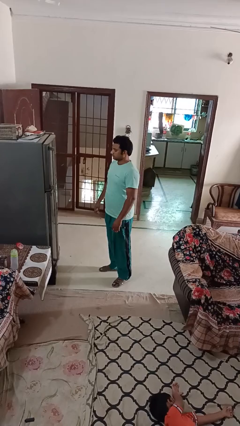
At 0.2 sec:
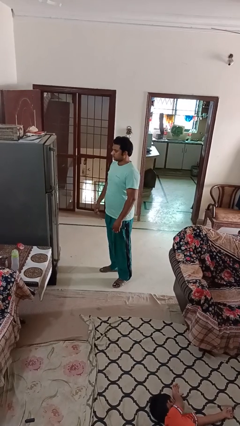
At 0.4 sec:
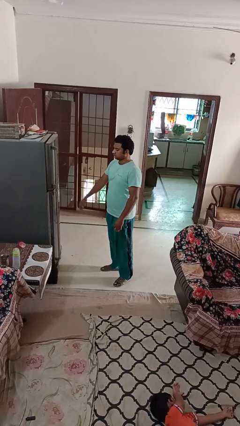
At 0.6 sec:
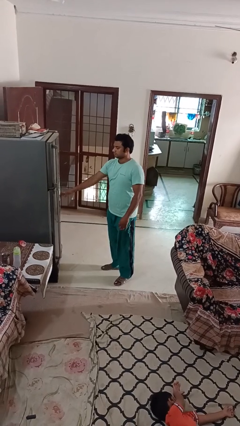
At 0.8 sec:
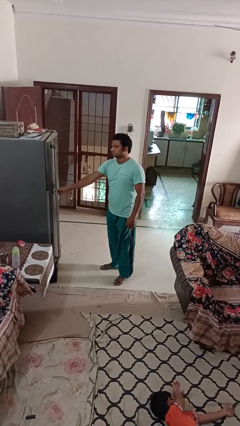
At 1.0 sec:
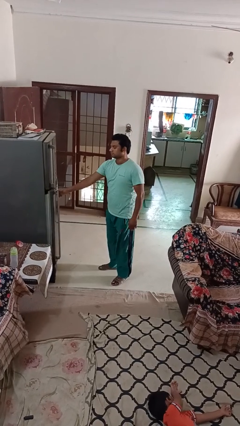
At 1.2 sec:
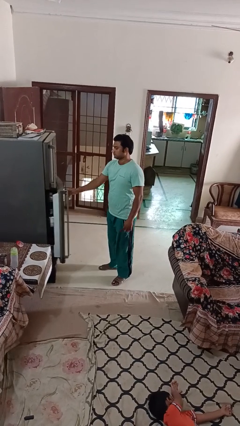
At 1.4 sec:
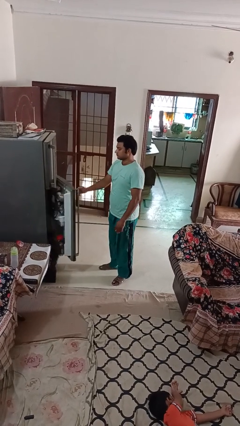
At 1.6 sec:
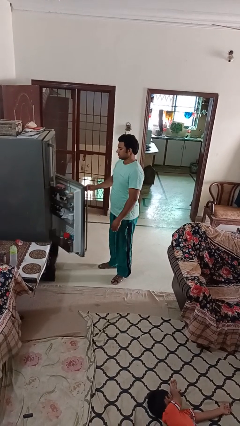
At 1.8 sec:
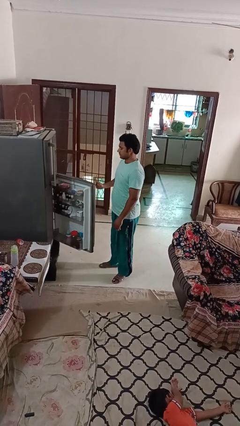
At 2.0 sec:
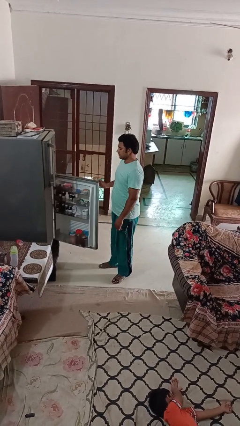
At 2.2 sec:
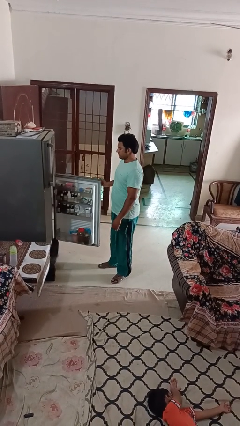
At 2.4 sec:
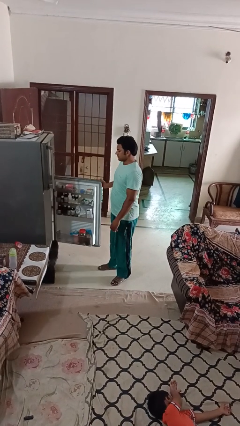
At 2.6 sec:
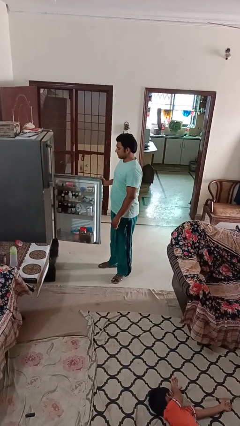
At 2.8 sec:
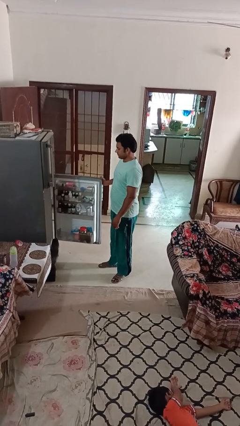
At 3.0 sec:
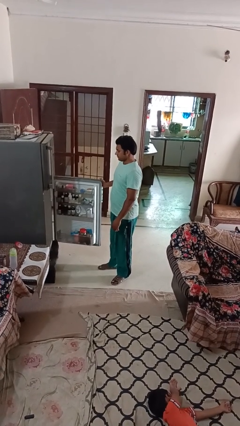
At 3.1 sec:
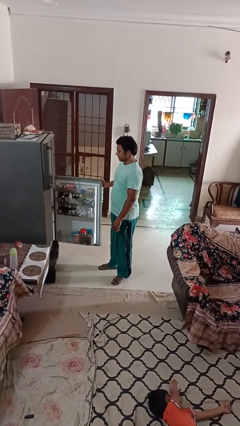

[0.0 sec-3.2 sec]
person opens refrigerator

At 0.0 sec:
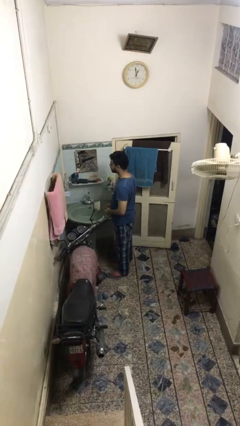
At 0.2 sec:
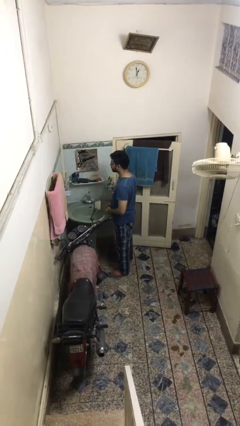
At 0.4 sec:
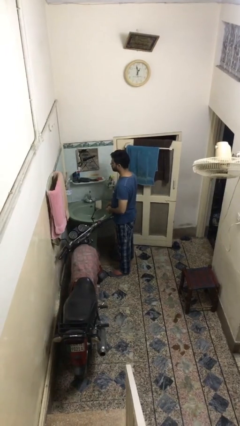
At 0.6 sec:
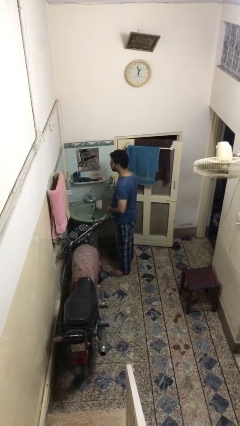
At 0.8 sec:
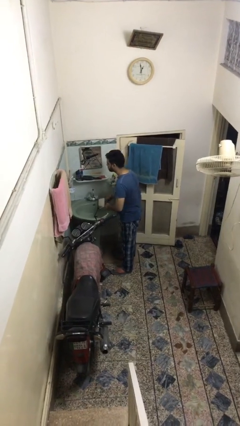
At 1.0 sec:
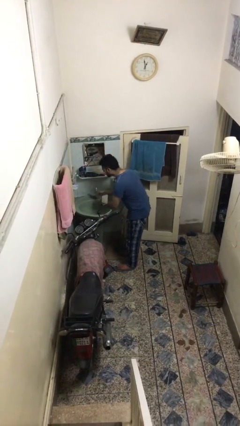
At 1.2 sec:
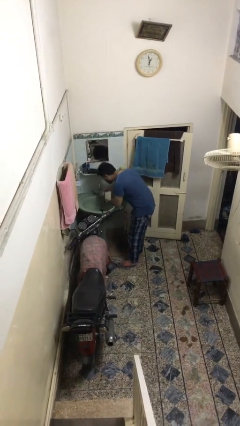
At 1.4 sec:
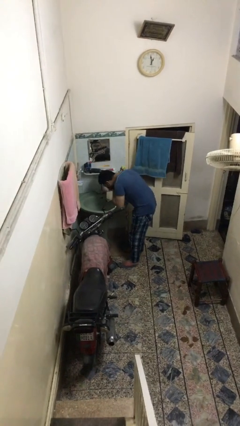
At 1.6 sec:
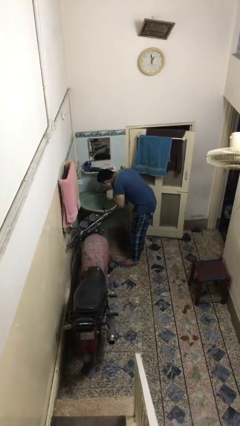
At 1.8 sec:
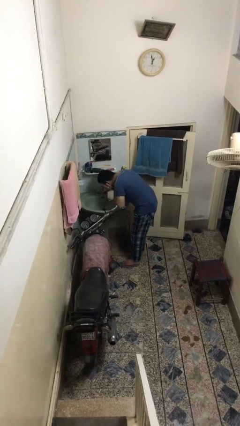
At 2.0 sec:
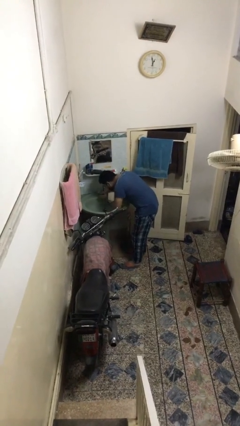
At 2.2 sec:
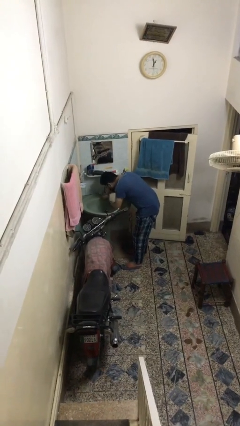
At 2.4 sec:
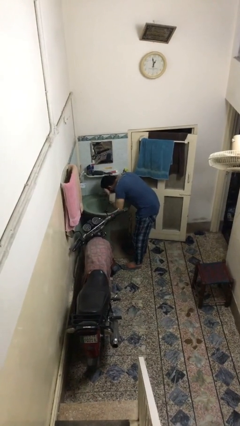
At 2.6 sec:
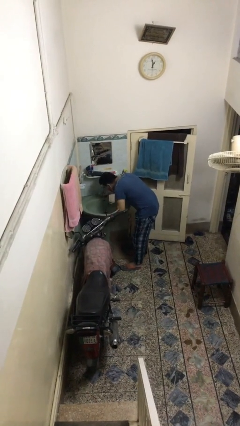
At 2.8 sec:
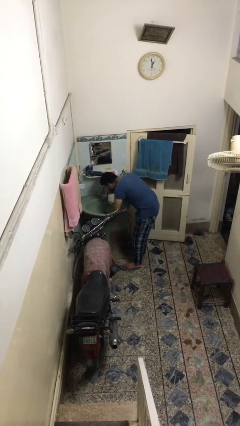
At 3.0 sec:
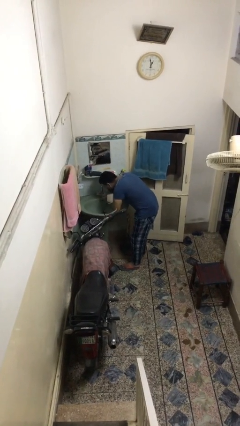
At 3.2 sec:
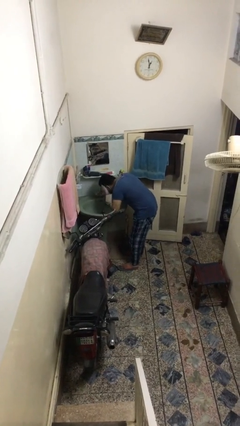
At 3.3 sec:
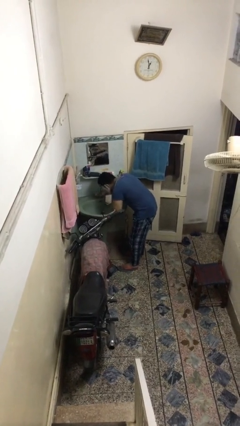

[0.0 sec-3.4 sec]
person washes face

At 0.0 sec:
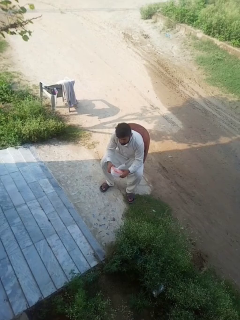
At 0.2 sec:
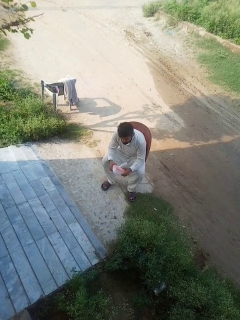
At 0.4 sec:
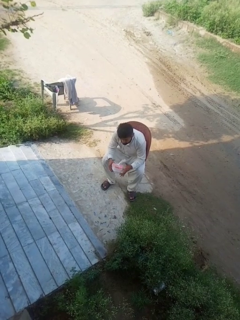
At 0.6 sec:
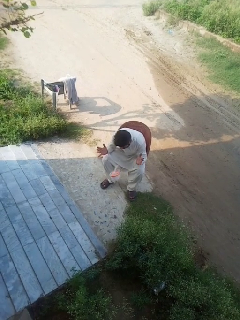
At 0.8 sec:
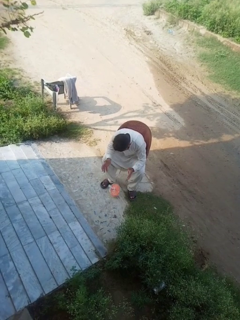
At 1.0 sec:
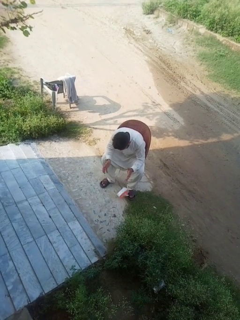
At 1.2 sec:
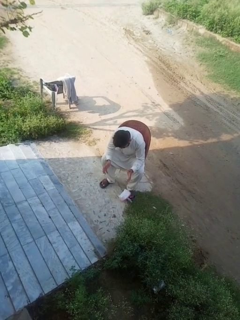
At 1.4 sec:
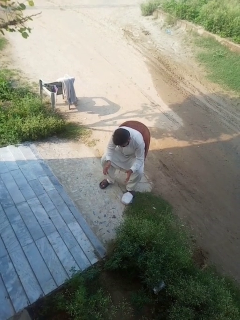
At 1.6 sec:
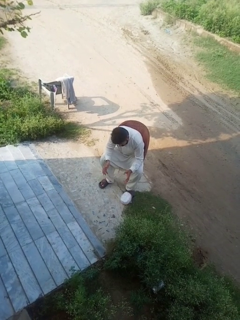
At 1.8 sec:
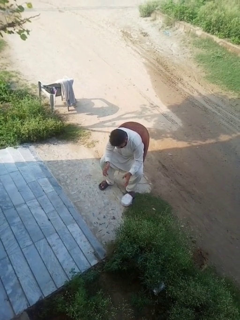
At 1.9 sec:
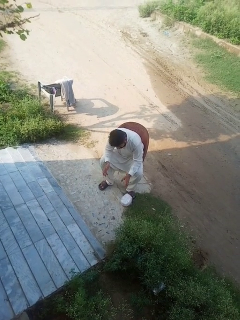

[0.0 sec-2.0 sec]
person drops object

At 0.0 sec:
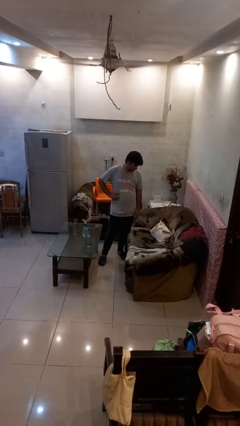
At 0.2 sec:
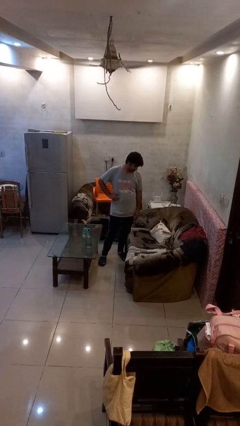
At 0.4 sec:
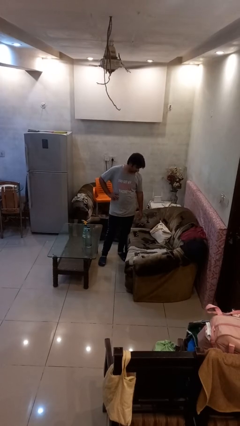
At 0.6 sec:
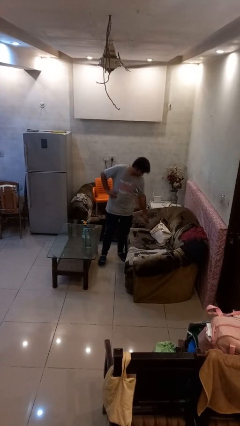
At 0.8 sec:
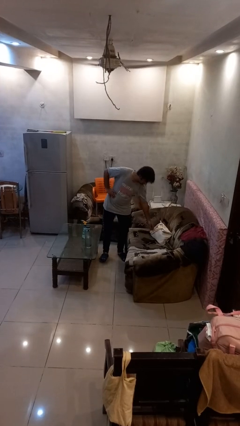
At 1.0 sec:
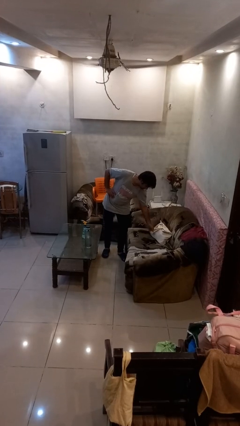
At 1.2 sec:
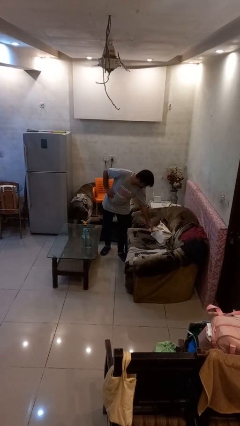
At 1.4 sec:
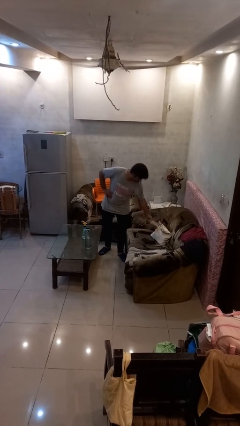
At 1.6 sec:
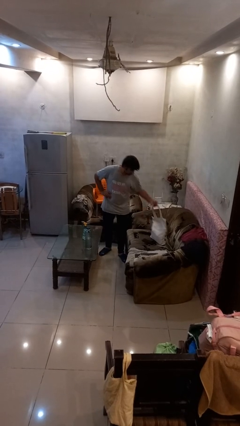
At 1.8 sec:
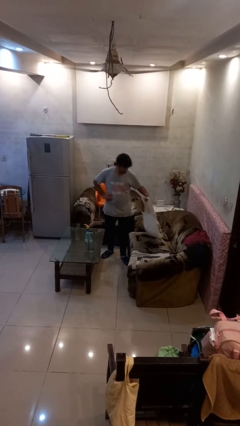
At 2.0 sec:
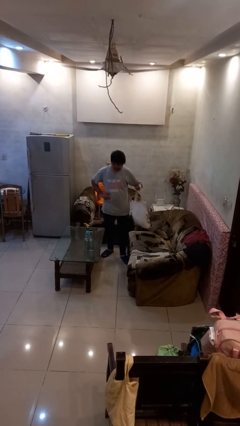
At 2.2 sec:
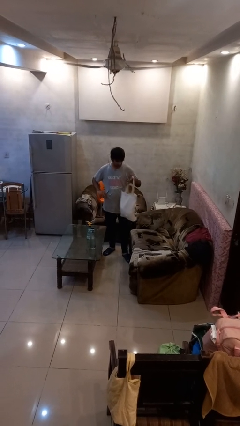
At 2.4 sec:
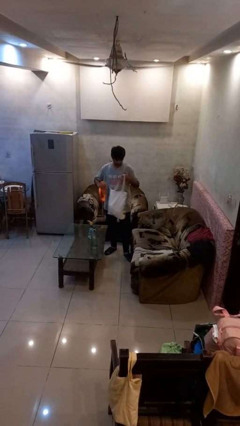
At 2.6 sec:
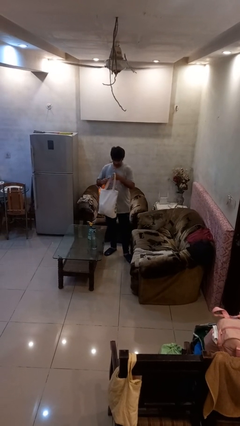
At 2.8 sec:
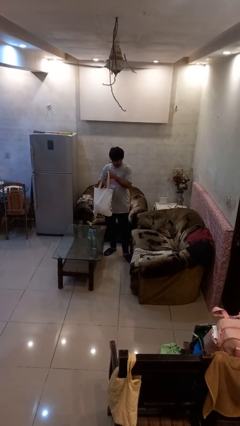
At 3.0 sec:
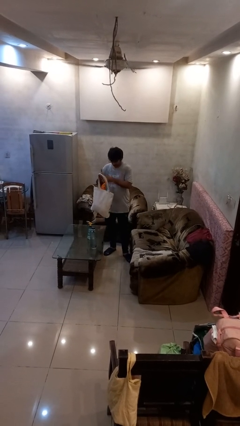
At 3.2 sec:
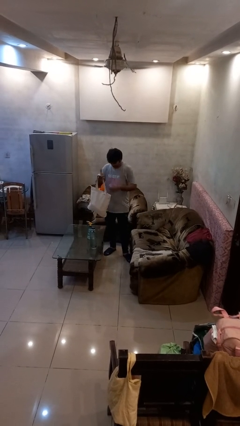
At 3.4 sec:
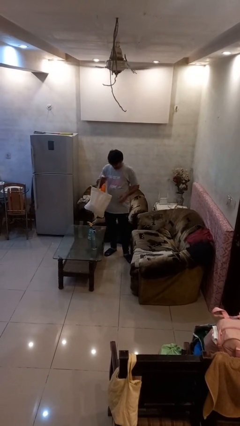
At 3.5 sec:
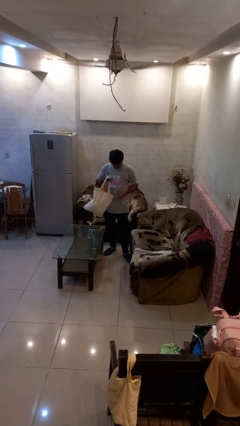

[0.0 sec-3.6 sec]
person picks up object from couch

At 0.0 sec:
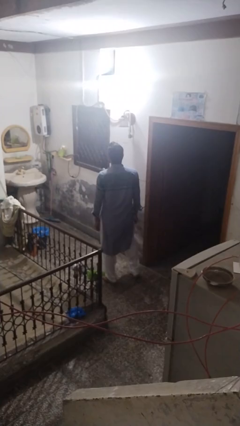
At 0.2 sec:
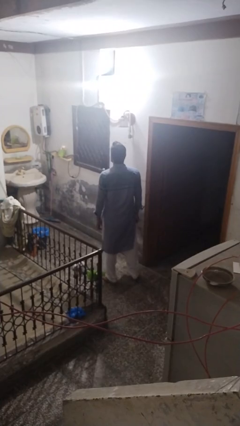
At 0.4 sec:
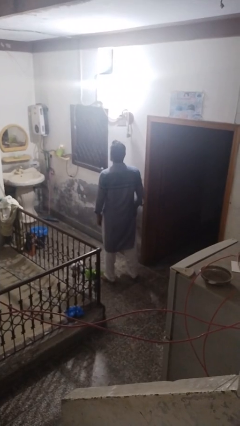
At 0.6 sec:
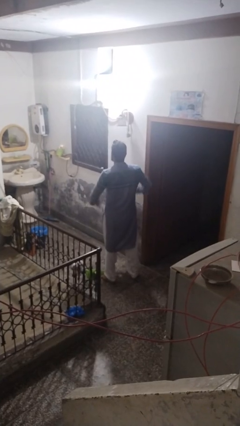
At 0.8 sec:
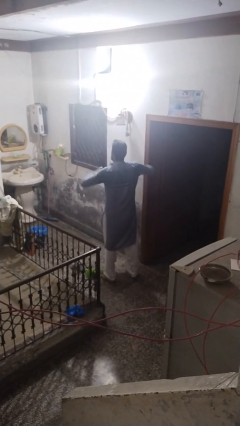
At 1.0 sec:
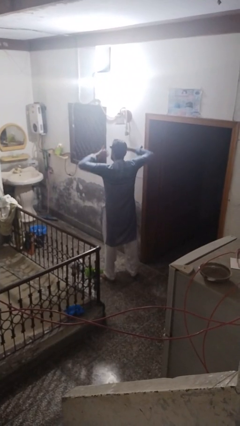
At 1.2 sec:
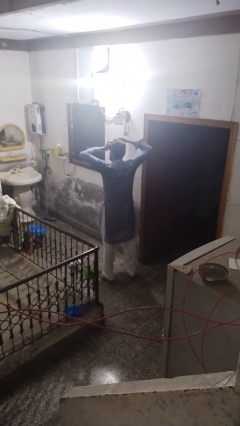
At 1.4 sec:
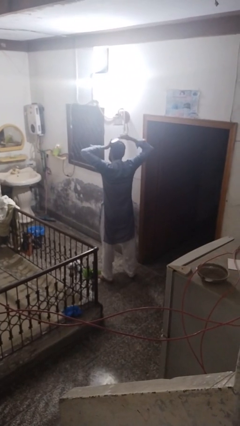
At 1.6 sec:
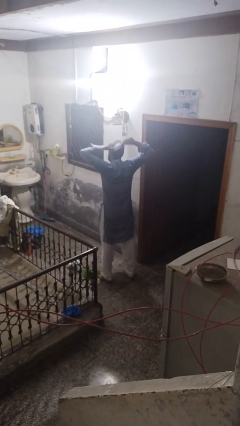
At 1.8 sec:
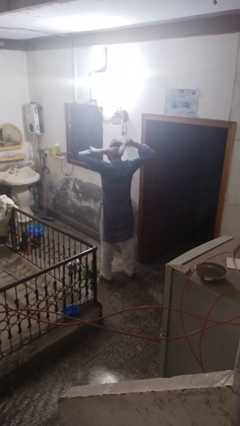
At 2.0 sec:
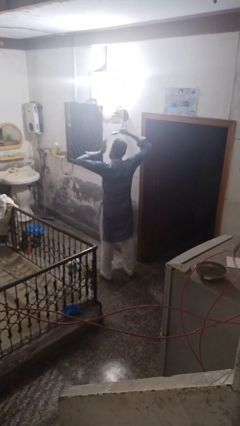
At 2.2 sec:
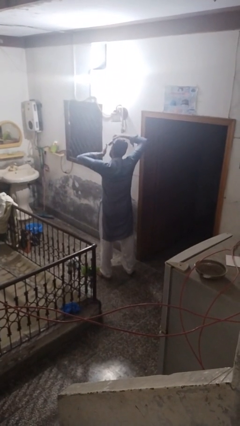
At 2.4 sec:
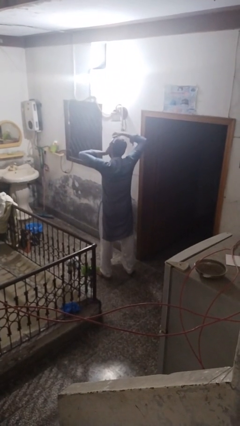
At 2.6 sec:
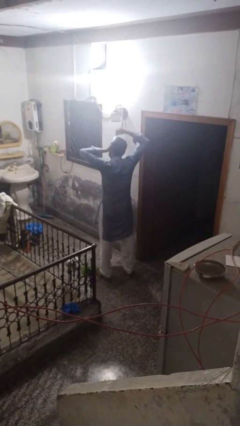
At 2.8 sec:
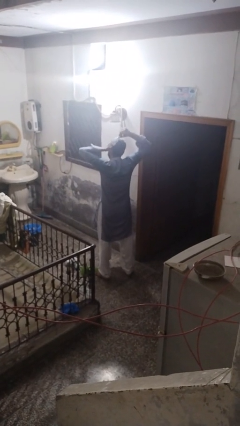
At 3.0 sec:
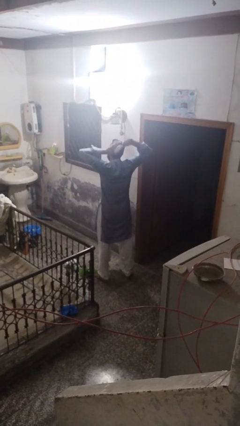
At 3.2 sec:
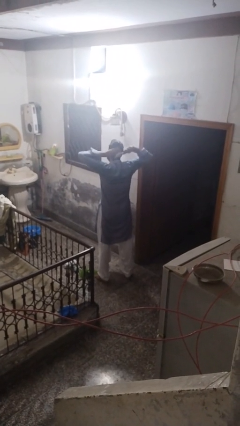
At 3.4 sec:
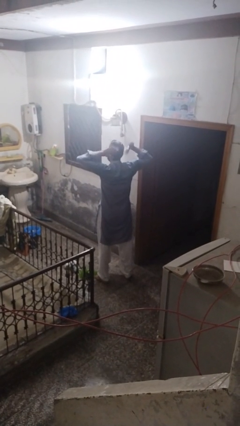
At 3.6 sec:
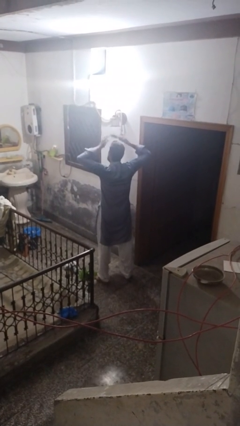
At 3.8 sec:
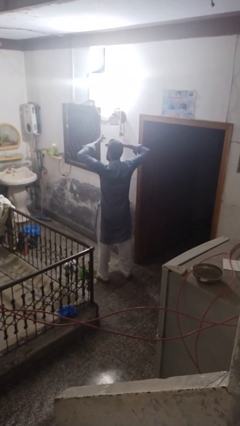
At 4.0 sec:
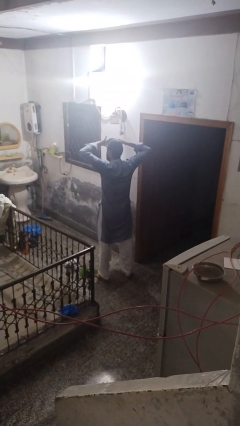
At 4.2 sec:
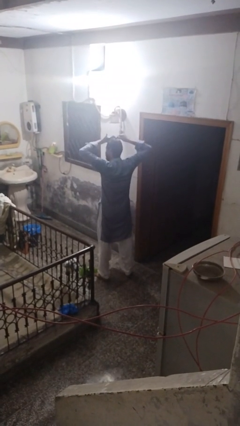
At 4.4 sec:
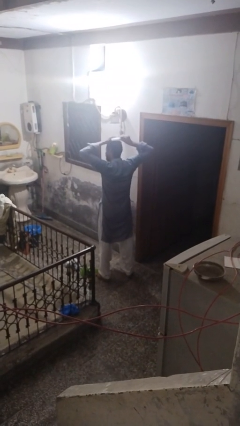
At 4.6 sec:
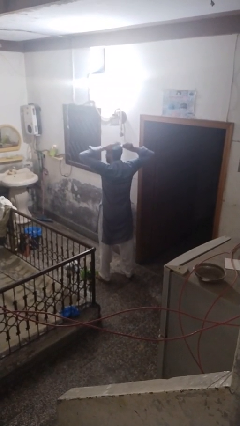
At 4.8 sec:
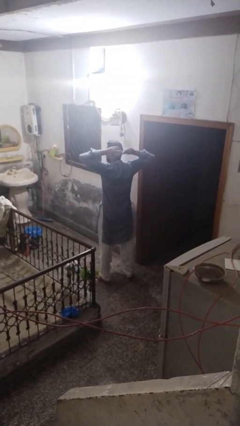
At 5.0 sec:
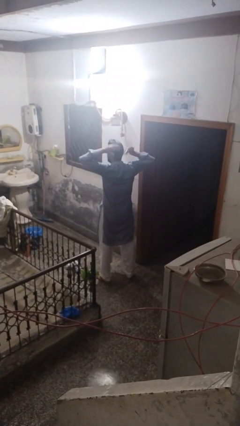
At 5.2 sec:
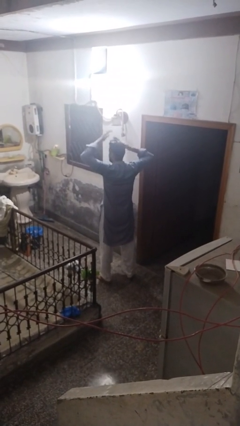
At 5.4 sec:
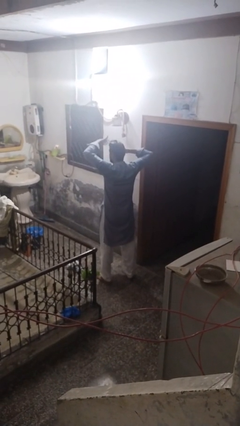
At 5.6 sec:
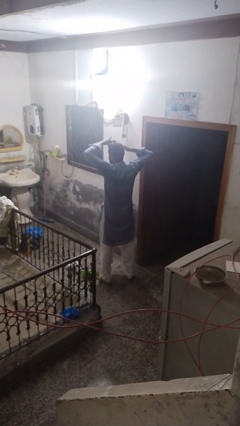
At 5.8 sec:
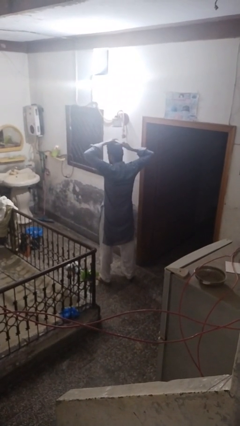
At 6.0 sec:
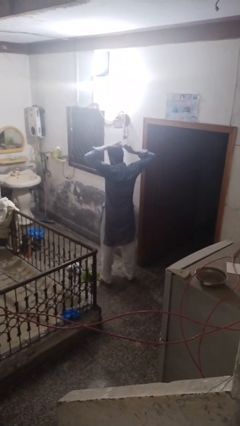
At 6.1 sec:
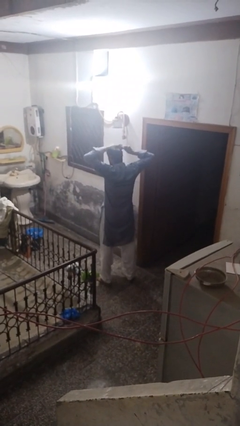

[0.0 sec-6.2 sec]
person brushes hair
